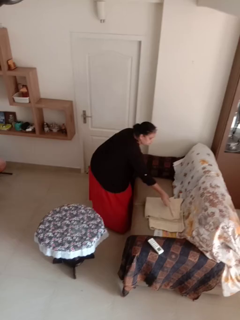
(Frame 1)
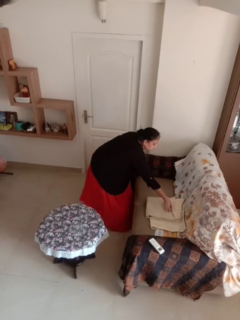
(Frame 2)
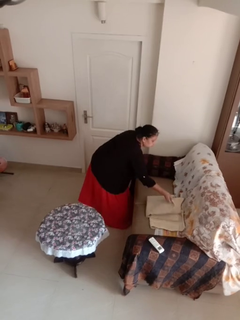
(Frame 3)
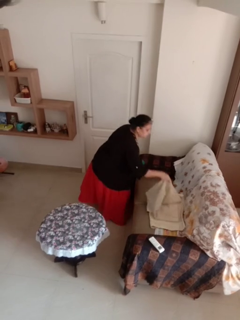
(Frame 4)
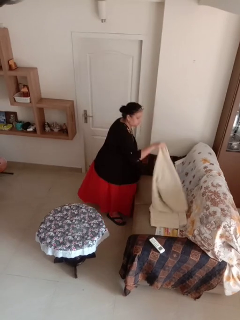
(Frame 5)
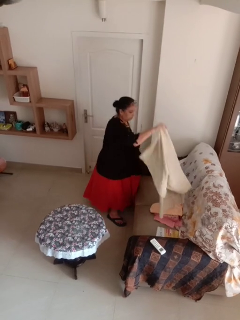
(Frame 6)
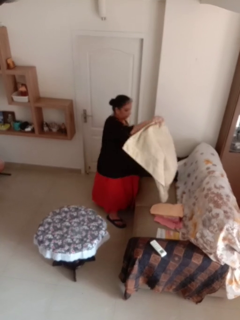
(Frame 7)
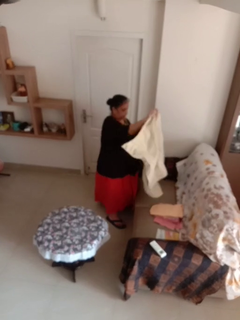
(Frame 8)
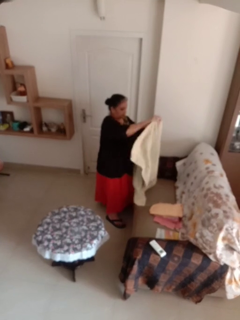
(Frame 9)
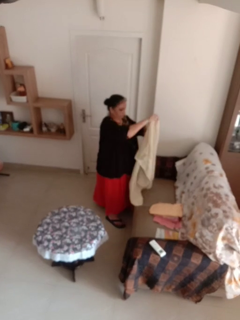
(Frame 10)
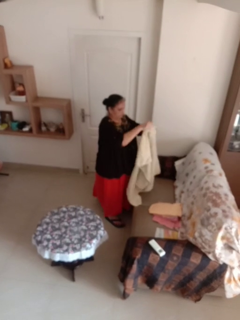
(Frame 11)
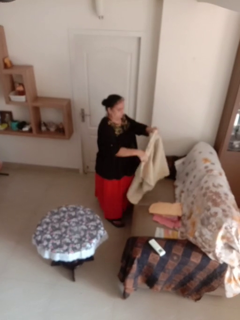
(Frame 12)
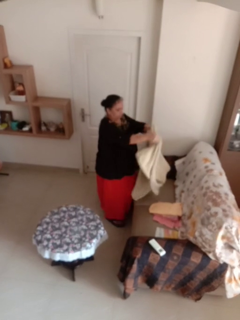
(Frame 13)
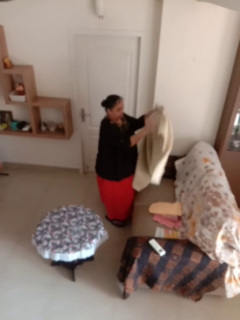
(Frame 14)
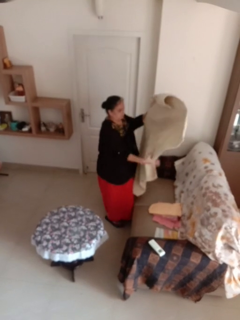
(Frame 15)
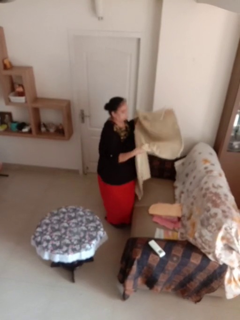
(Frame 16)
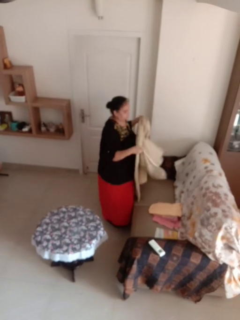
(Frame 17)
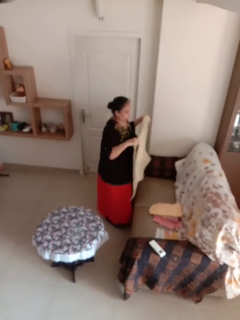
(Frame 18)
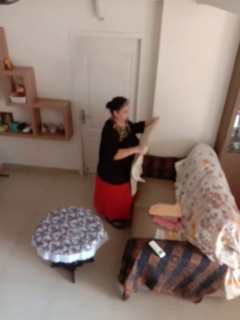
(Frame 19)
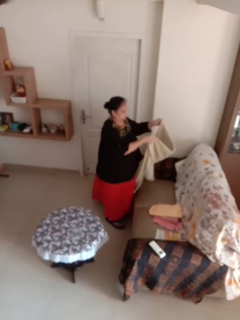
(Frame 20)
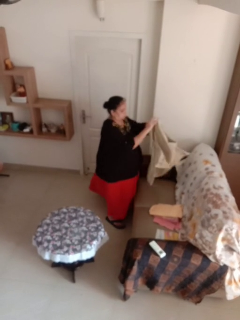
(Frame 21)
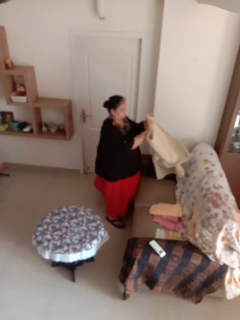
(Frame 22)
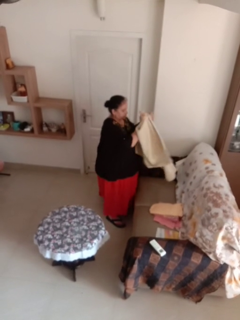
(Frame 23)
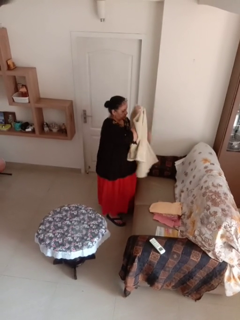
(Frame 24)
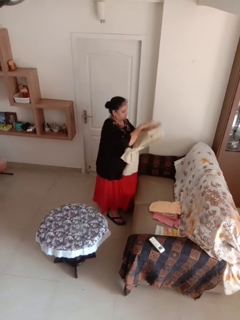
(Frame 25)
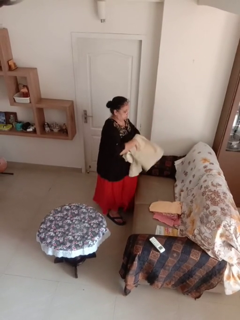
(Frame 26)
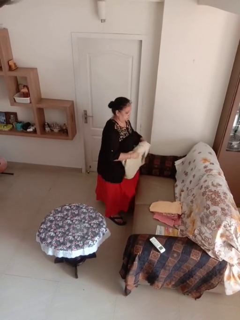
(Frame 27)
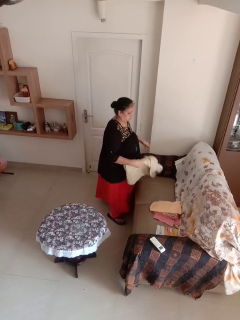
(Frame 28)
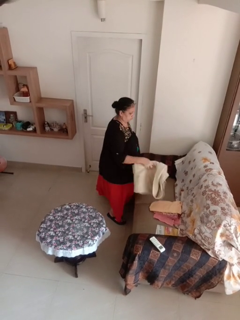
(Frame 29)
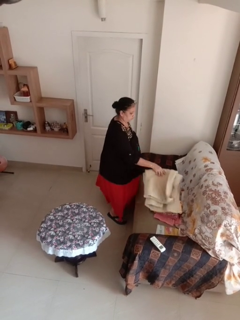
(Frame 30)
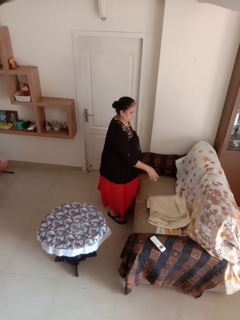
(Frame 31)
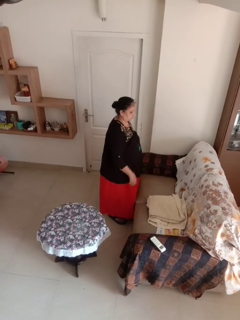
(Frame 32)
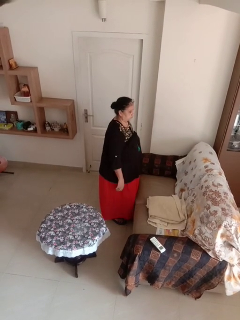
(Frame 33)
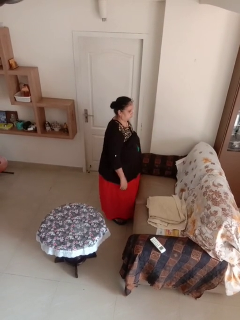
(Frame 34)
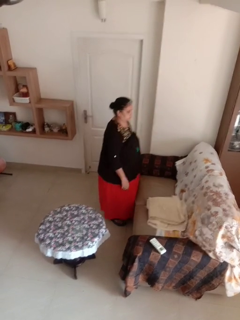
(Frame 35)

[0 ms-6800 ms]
person folds towel

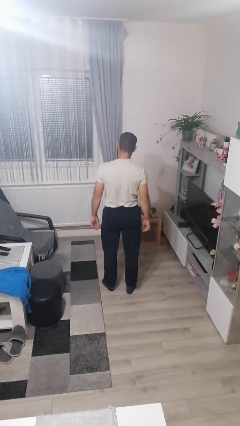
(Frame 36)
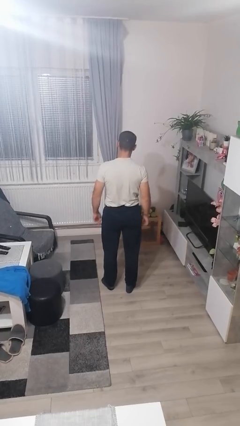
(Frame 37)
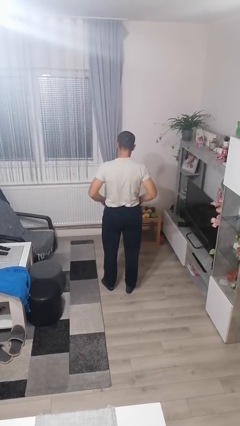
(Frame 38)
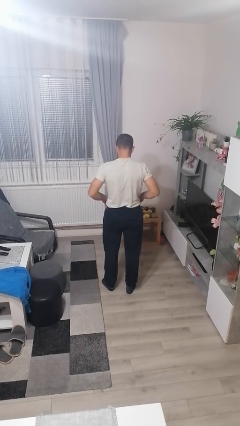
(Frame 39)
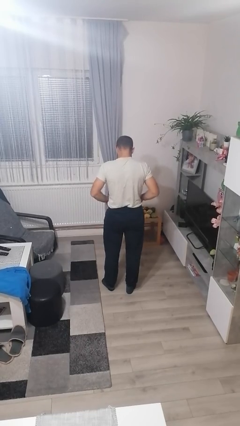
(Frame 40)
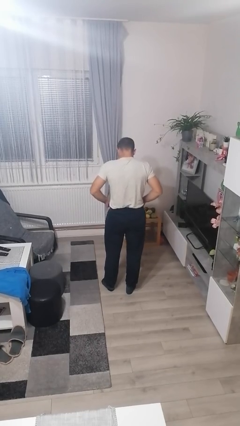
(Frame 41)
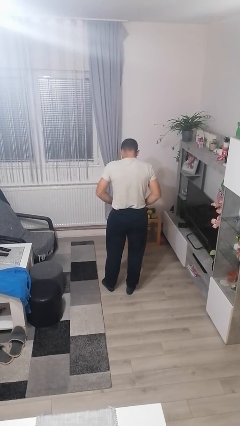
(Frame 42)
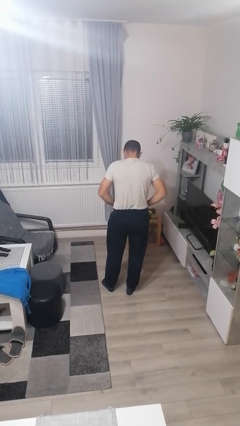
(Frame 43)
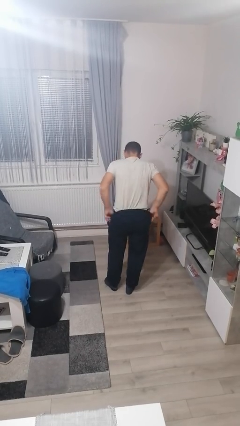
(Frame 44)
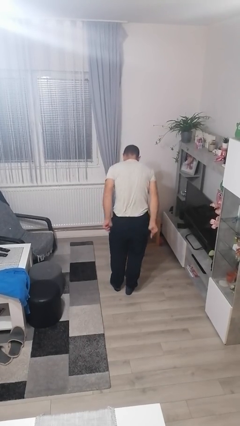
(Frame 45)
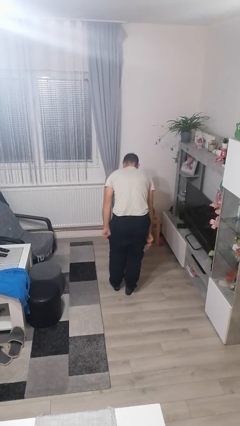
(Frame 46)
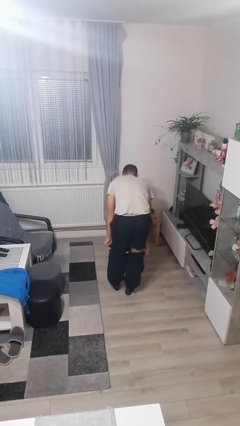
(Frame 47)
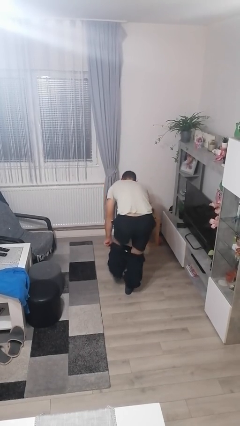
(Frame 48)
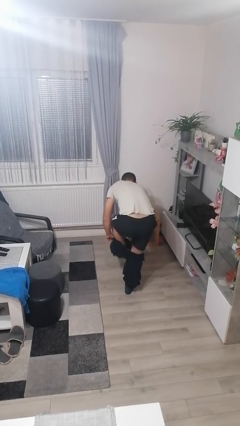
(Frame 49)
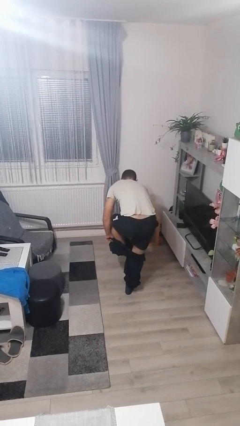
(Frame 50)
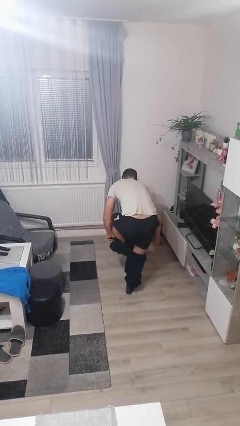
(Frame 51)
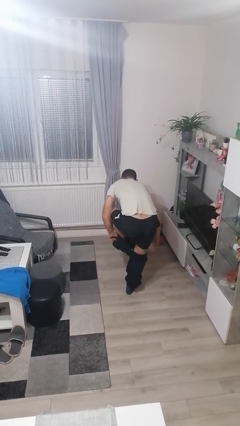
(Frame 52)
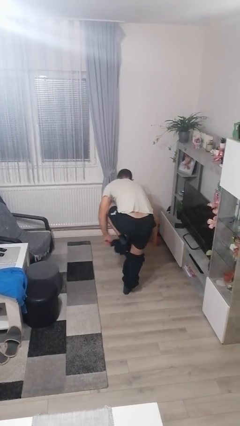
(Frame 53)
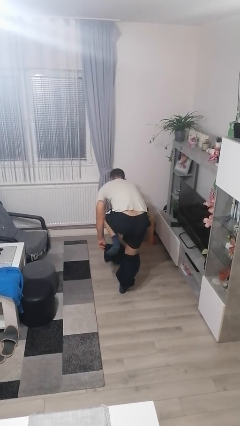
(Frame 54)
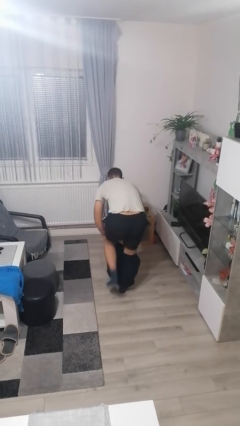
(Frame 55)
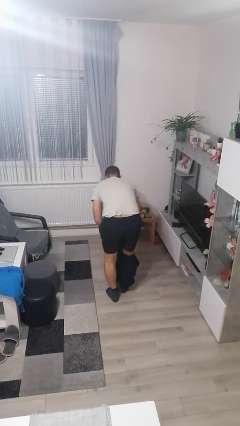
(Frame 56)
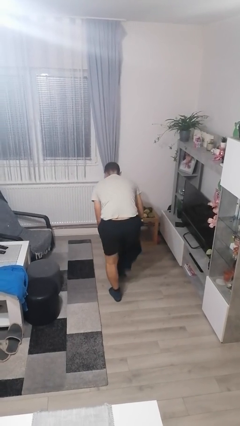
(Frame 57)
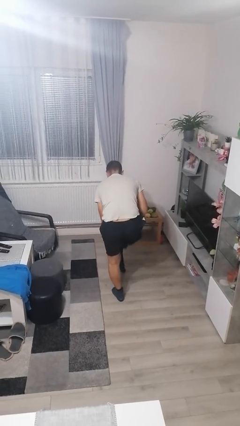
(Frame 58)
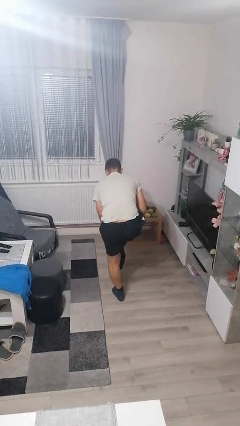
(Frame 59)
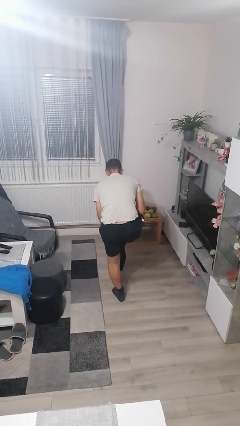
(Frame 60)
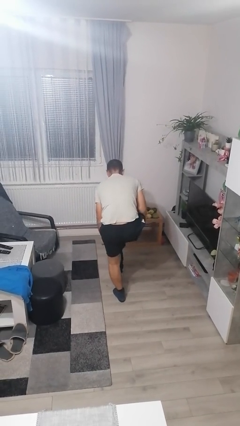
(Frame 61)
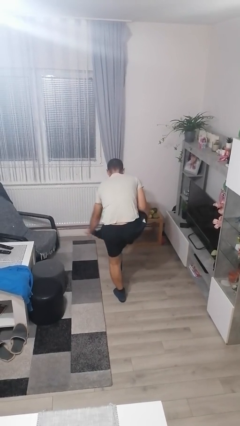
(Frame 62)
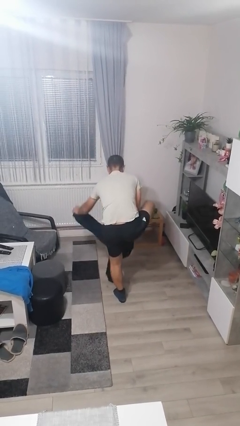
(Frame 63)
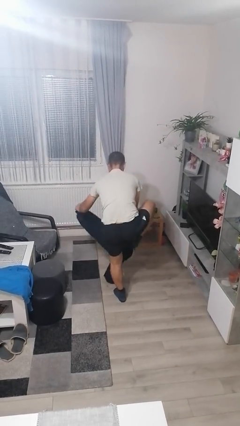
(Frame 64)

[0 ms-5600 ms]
person takes off pants

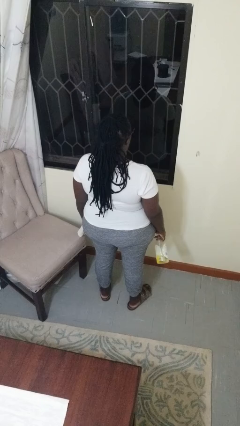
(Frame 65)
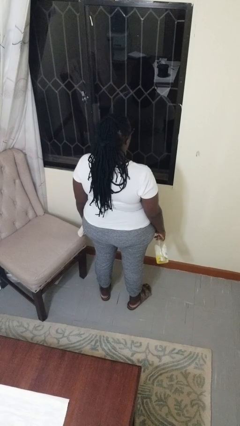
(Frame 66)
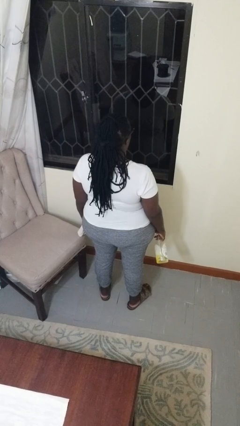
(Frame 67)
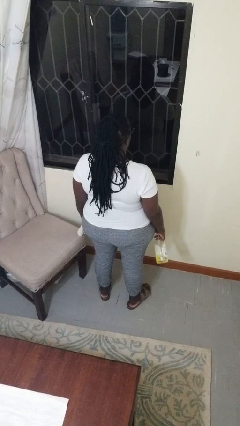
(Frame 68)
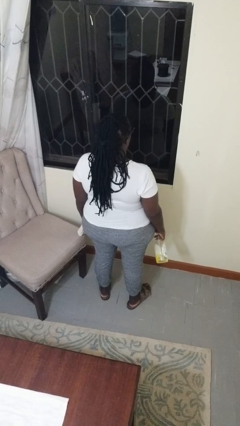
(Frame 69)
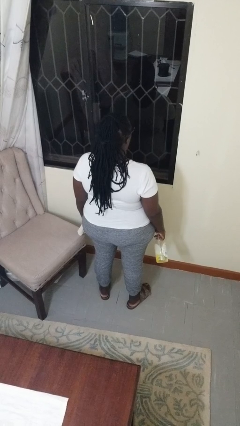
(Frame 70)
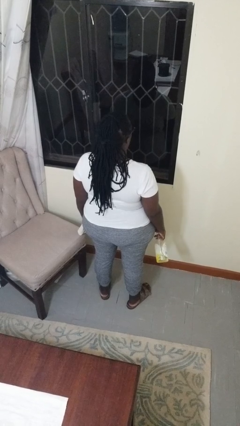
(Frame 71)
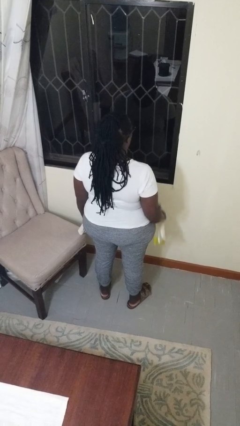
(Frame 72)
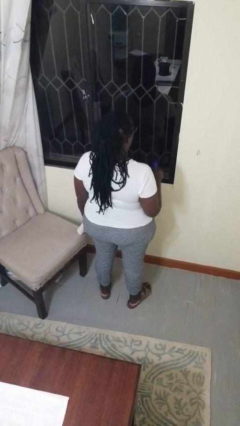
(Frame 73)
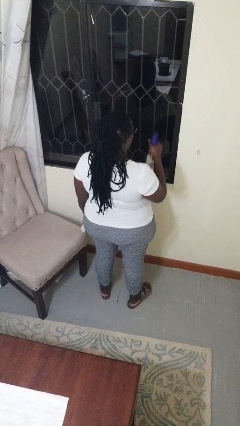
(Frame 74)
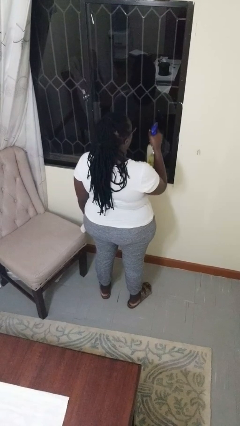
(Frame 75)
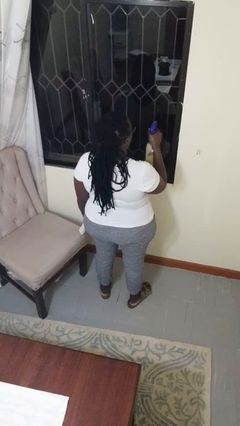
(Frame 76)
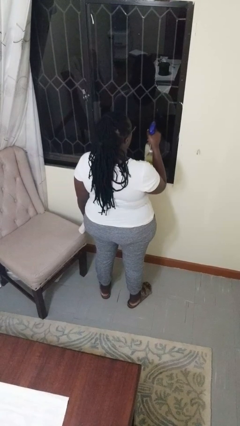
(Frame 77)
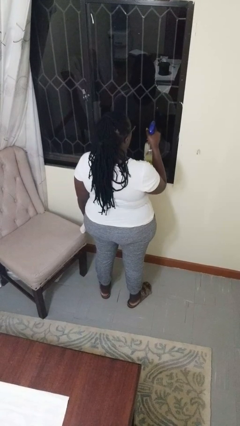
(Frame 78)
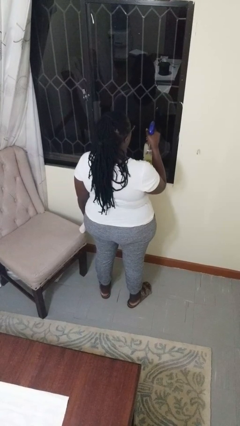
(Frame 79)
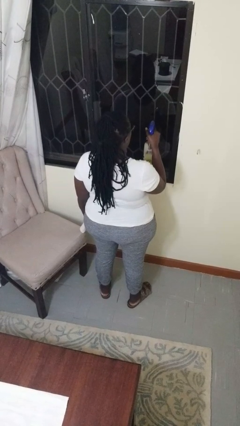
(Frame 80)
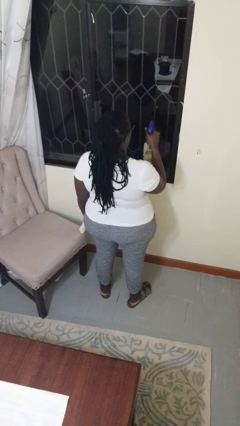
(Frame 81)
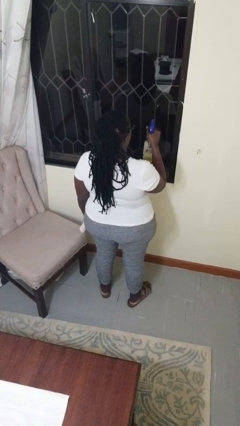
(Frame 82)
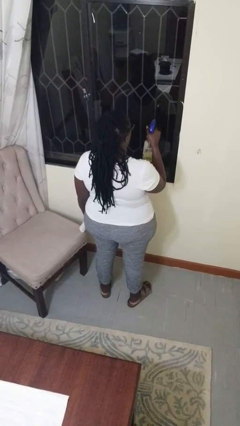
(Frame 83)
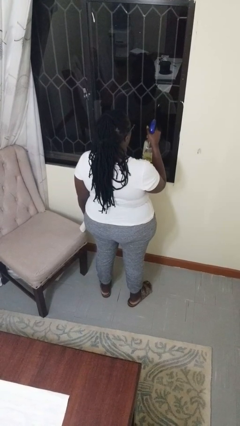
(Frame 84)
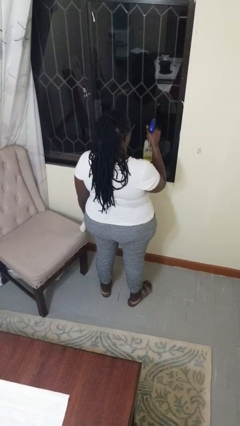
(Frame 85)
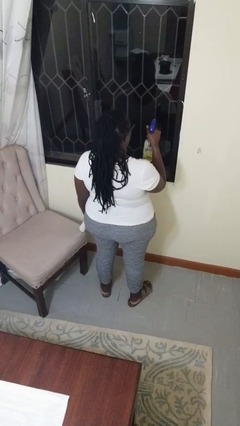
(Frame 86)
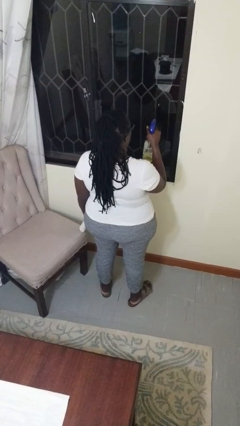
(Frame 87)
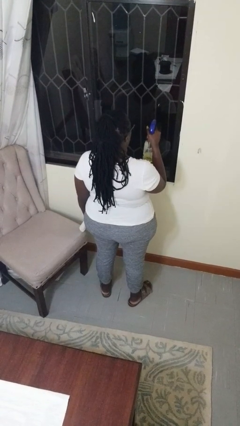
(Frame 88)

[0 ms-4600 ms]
person sprays from bottle

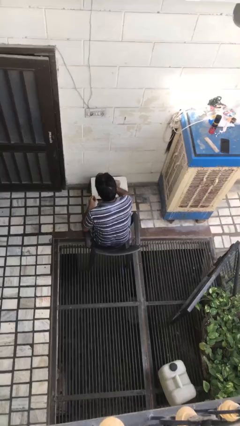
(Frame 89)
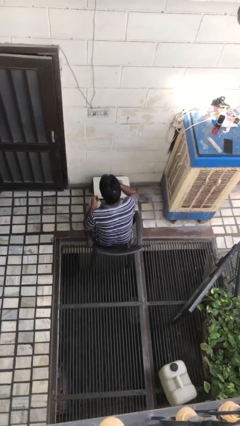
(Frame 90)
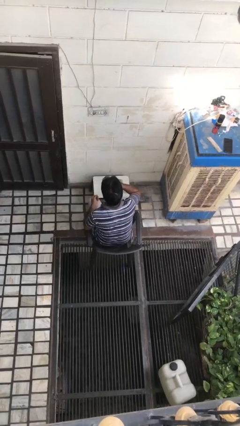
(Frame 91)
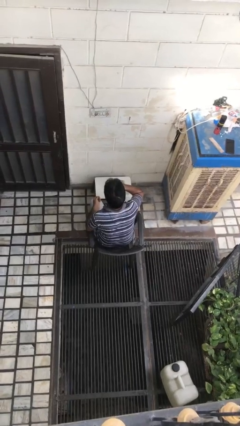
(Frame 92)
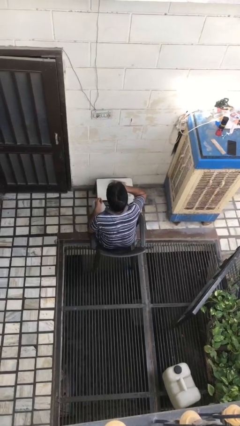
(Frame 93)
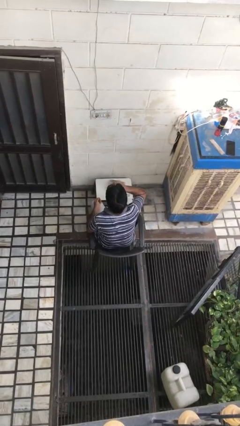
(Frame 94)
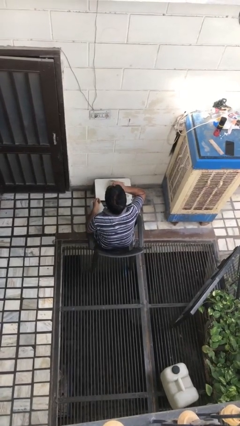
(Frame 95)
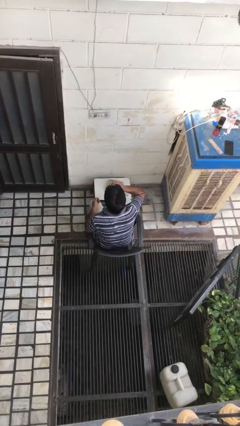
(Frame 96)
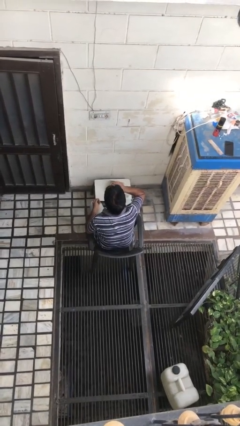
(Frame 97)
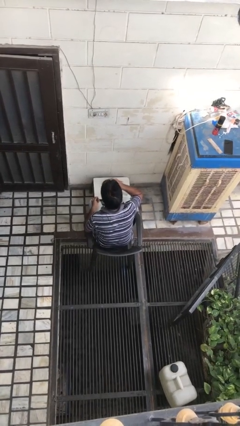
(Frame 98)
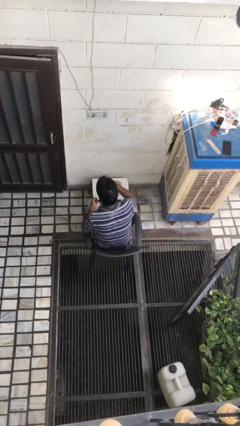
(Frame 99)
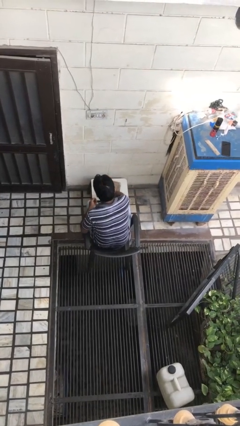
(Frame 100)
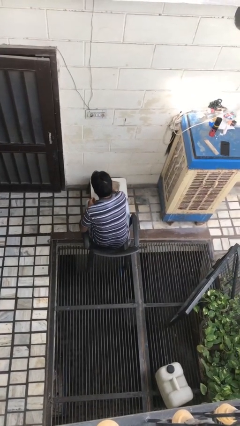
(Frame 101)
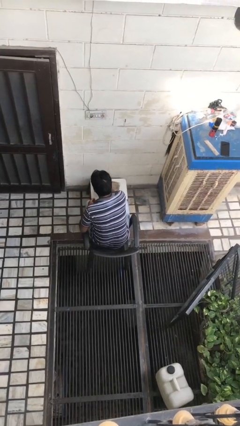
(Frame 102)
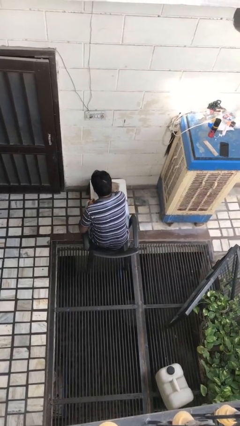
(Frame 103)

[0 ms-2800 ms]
person drinks from cup
